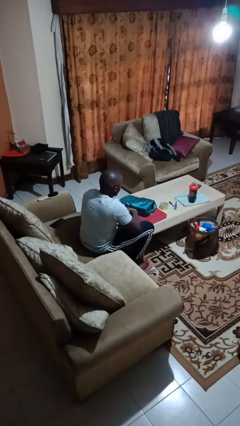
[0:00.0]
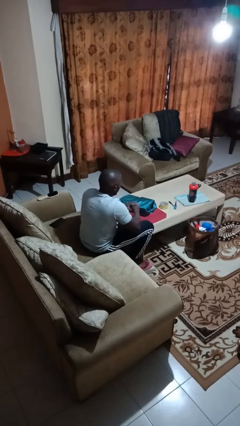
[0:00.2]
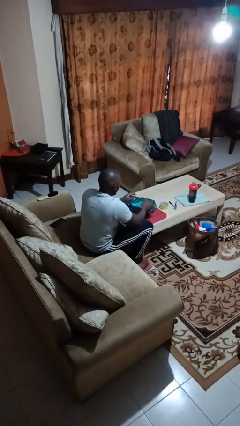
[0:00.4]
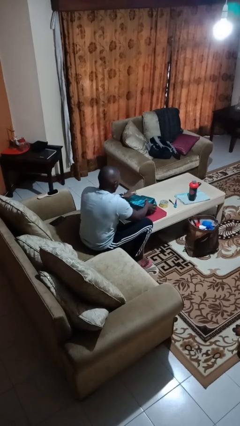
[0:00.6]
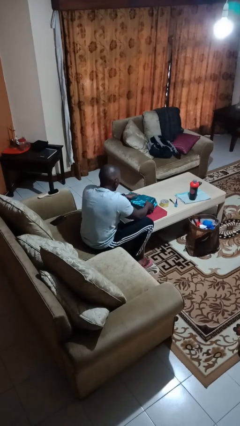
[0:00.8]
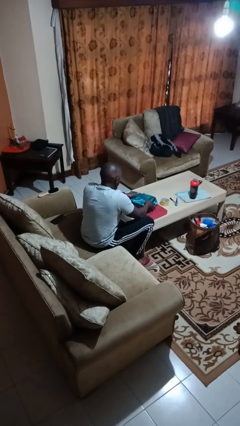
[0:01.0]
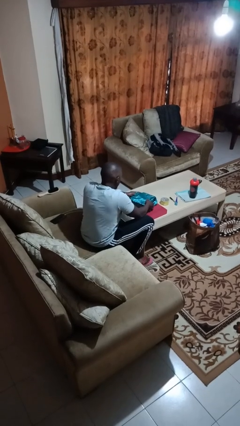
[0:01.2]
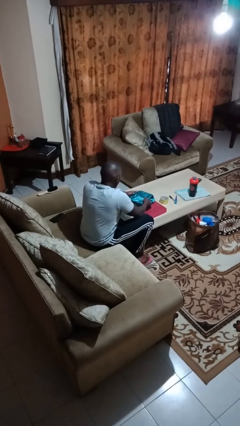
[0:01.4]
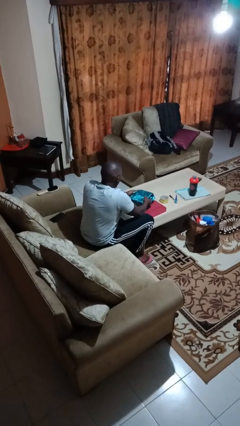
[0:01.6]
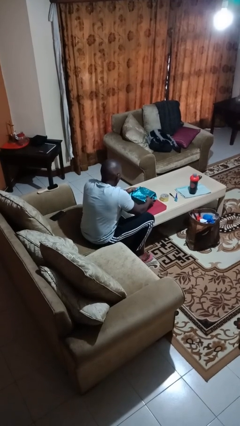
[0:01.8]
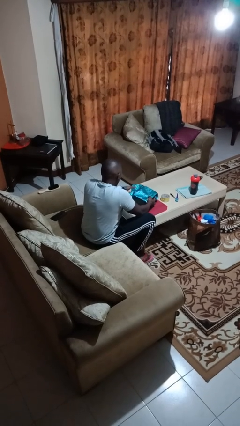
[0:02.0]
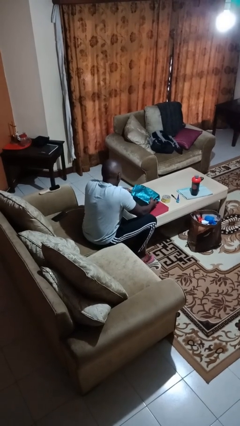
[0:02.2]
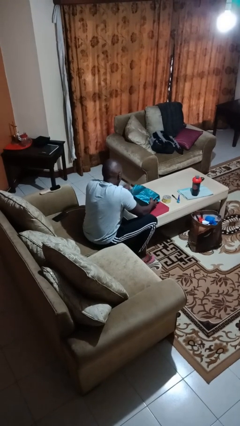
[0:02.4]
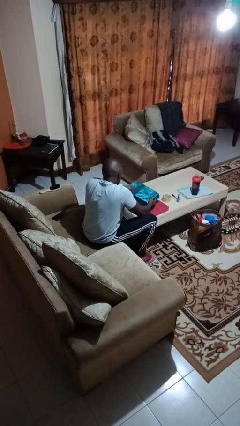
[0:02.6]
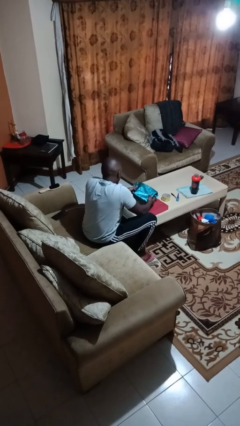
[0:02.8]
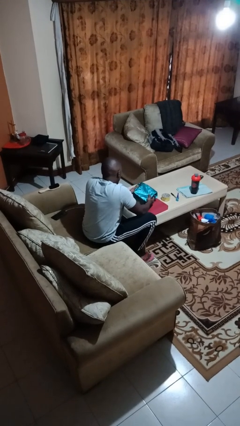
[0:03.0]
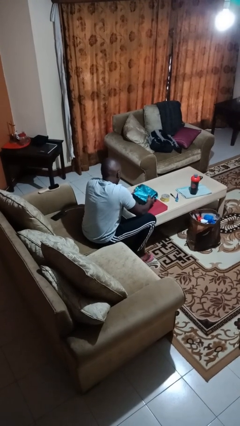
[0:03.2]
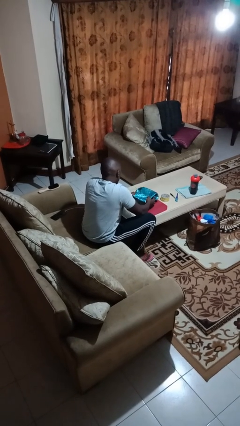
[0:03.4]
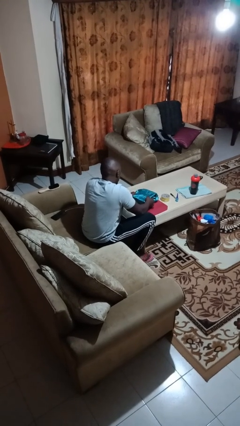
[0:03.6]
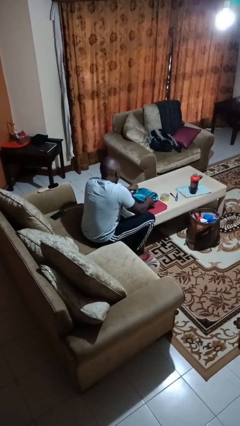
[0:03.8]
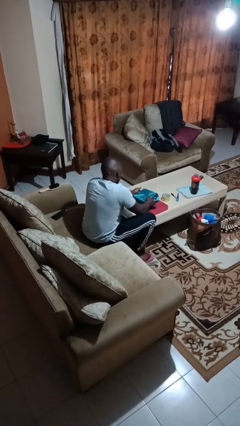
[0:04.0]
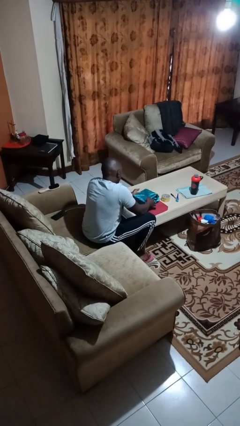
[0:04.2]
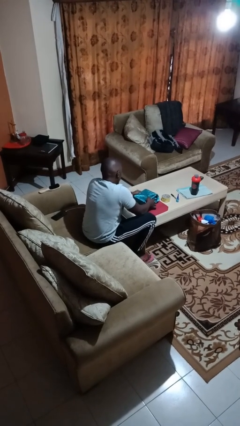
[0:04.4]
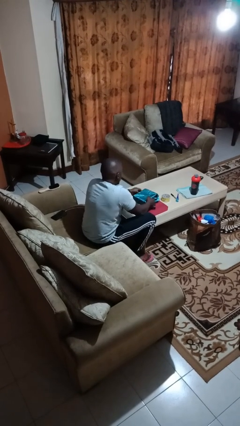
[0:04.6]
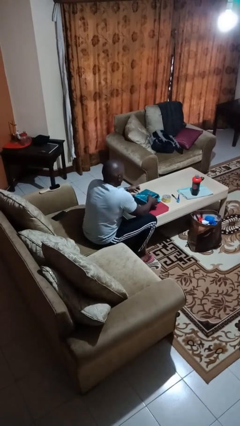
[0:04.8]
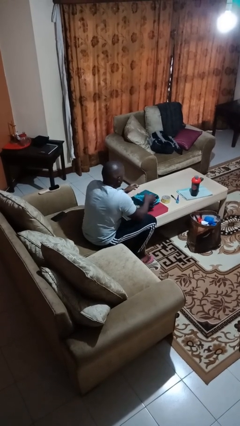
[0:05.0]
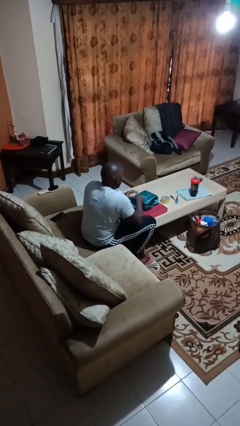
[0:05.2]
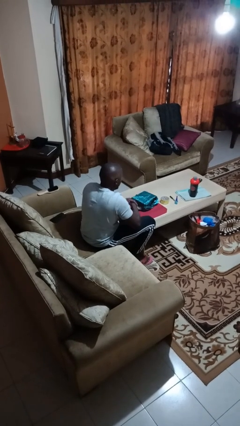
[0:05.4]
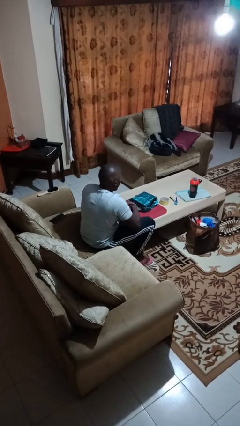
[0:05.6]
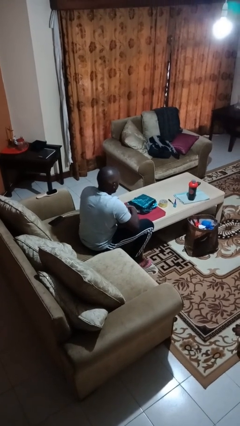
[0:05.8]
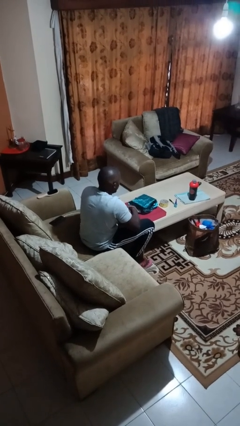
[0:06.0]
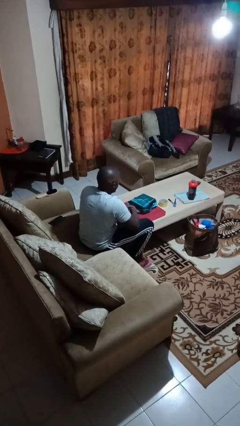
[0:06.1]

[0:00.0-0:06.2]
person wraps box

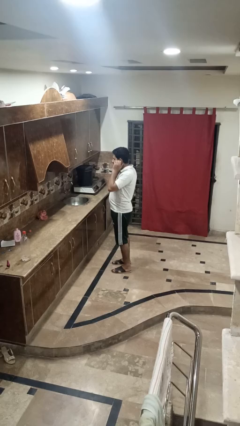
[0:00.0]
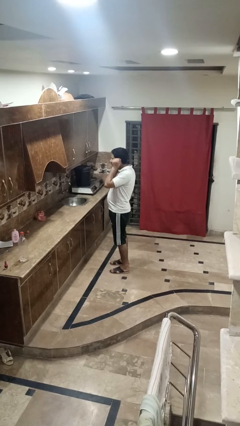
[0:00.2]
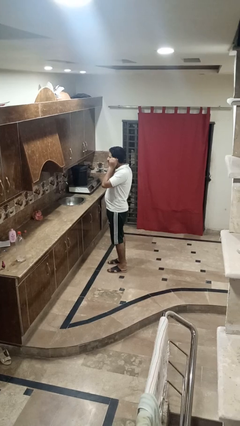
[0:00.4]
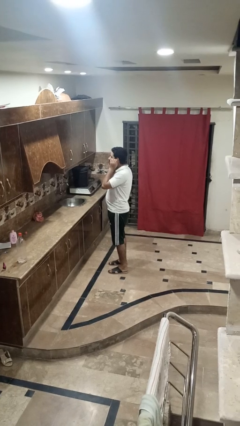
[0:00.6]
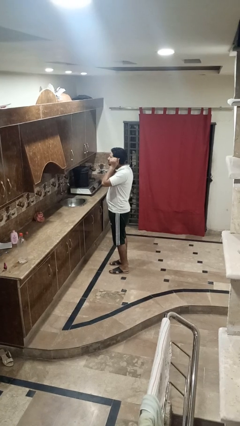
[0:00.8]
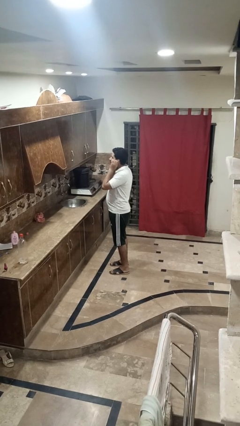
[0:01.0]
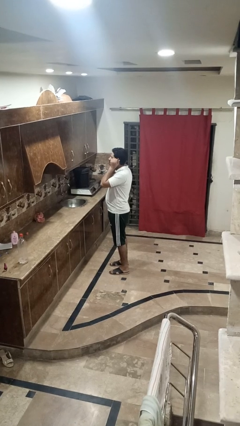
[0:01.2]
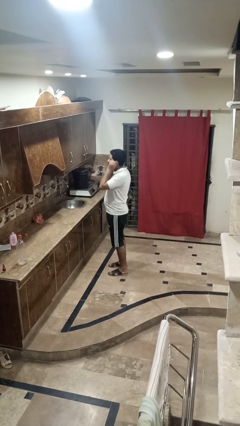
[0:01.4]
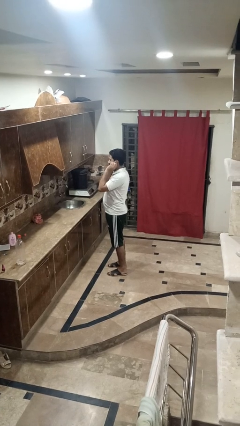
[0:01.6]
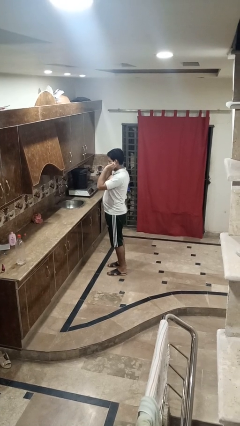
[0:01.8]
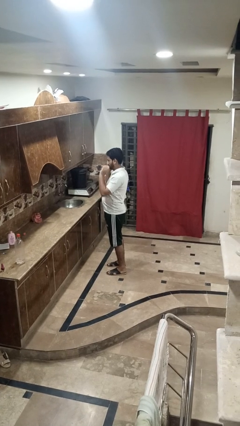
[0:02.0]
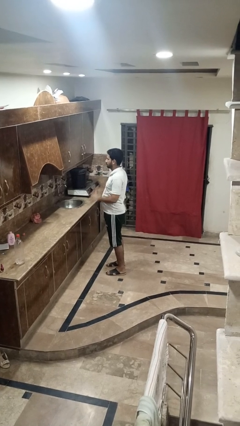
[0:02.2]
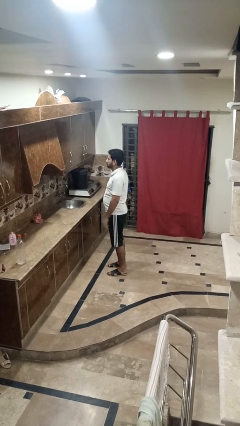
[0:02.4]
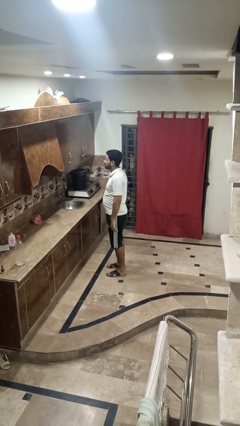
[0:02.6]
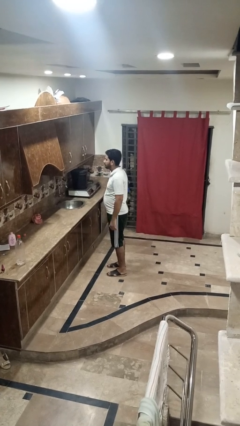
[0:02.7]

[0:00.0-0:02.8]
person touches earlobe

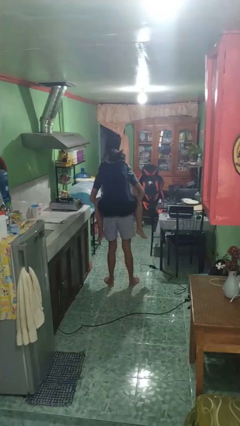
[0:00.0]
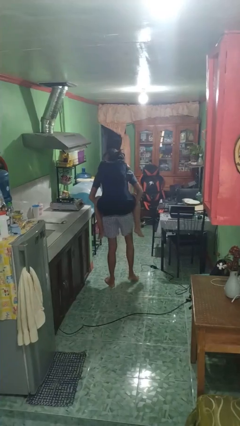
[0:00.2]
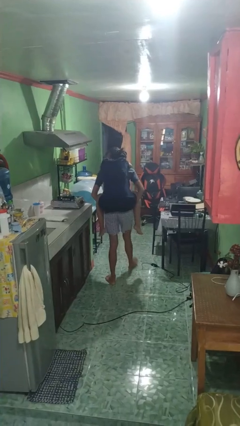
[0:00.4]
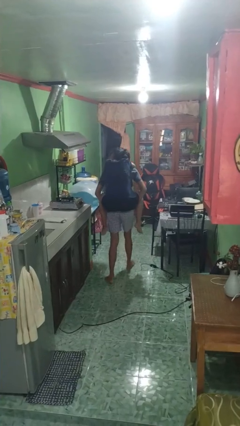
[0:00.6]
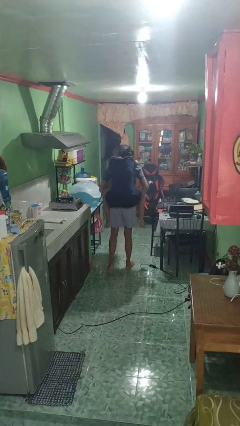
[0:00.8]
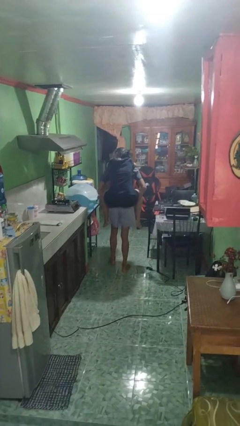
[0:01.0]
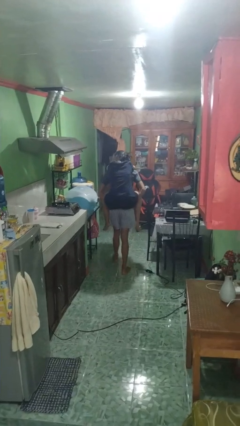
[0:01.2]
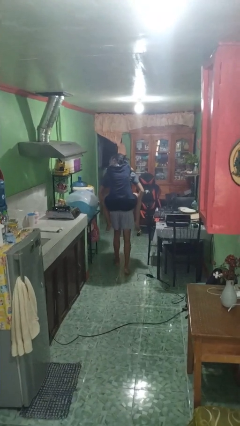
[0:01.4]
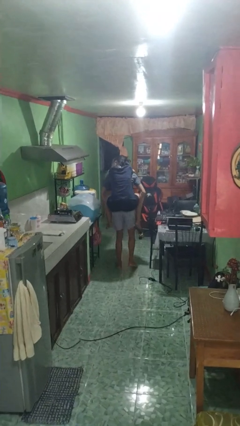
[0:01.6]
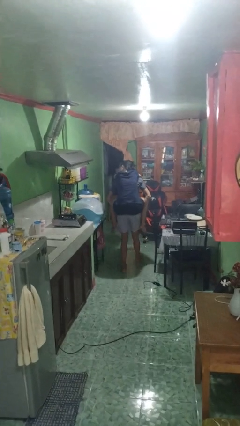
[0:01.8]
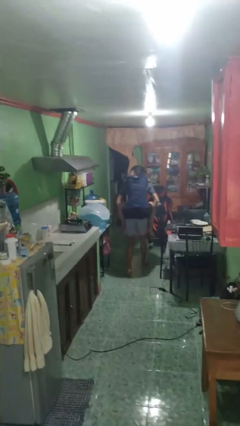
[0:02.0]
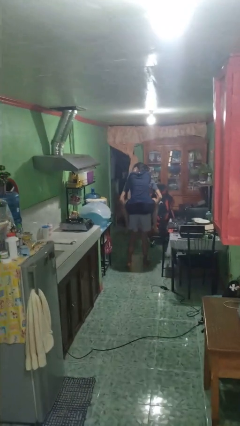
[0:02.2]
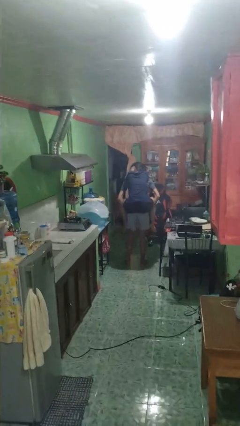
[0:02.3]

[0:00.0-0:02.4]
person carries person on back

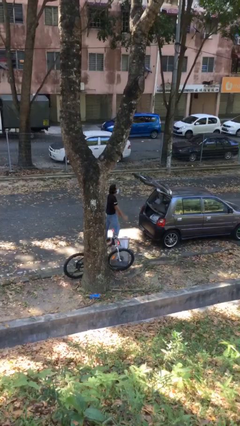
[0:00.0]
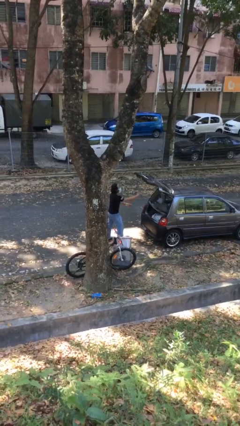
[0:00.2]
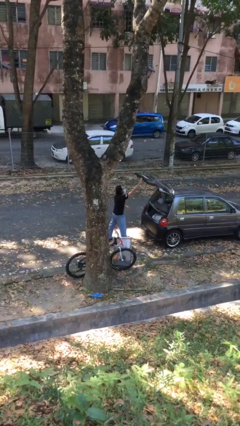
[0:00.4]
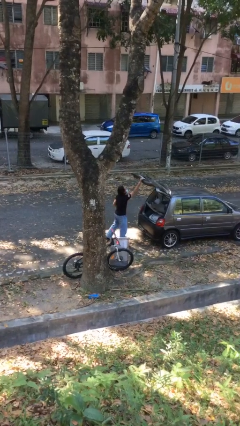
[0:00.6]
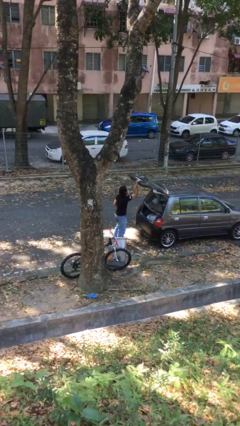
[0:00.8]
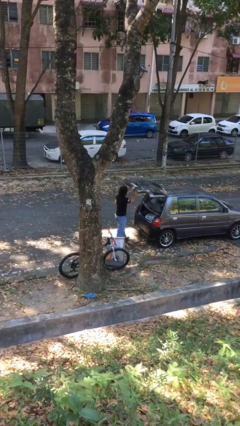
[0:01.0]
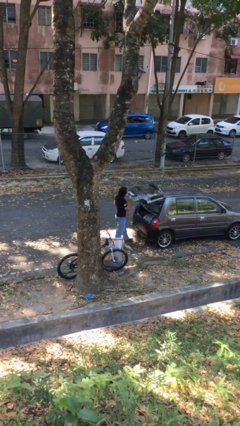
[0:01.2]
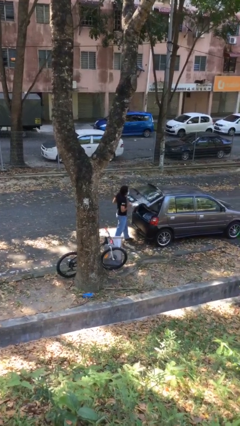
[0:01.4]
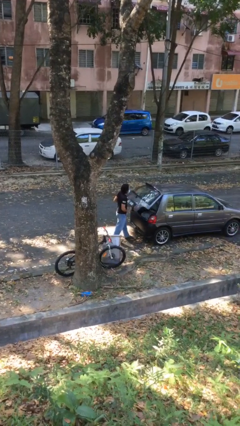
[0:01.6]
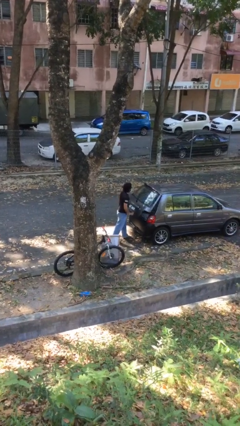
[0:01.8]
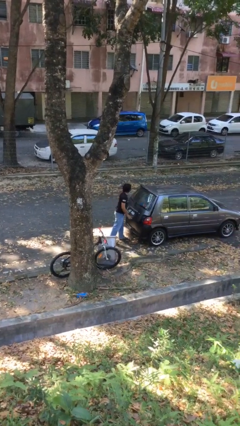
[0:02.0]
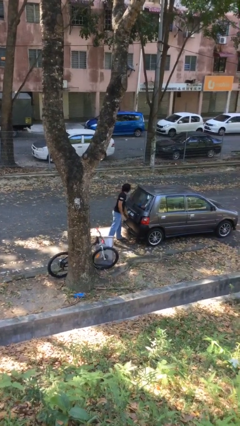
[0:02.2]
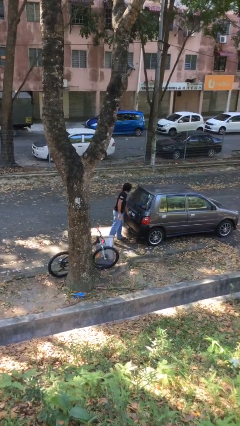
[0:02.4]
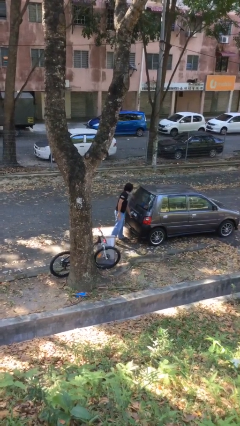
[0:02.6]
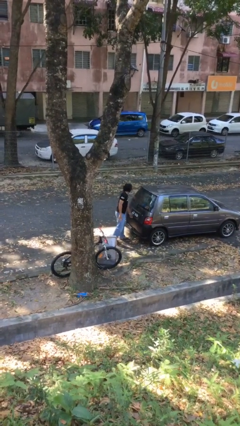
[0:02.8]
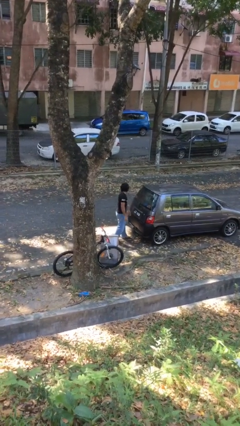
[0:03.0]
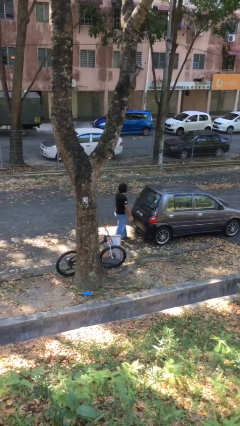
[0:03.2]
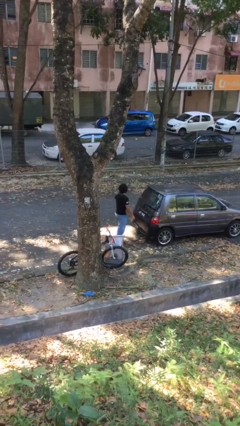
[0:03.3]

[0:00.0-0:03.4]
person closes car trunk

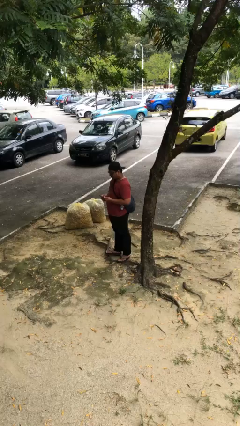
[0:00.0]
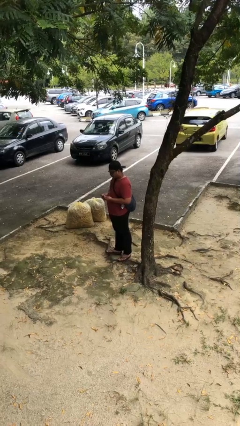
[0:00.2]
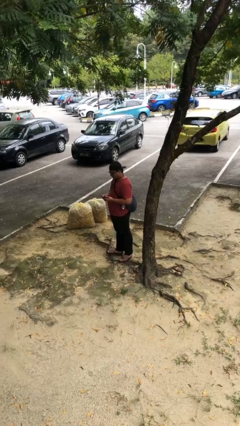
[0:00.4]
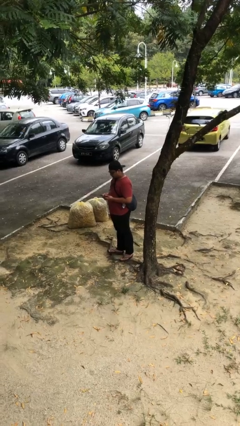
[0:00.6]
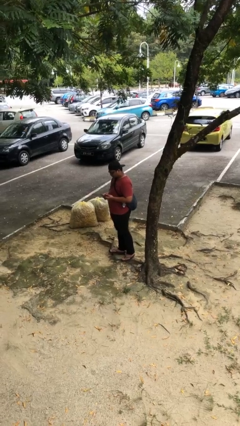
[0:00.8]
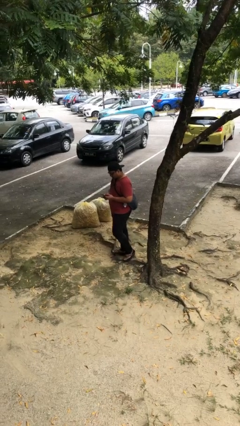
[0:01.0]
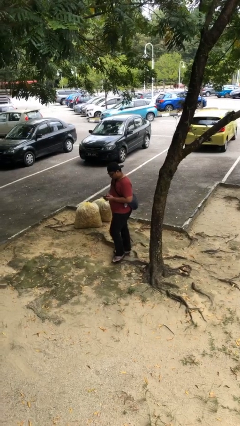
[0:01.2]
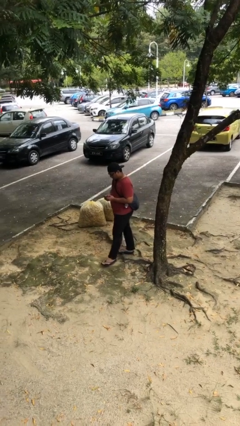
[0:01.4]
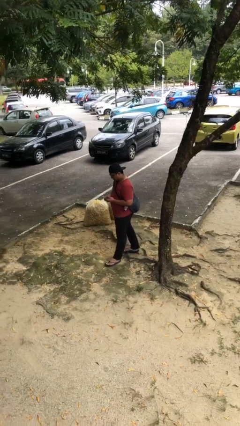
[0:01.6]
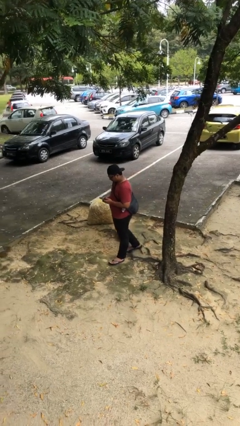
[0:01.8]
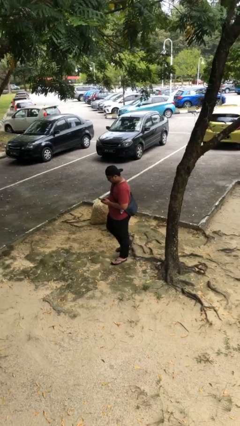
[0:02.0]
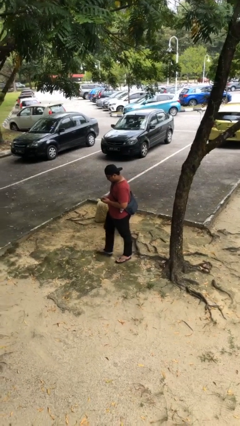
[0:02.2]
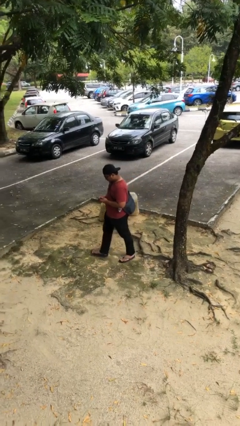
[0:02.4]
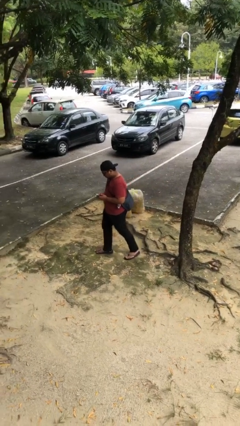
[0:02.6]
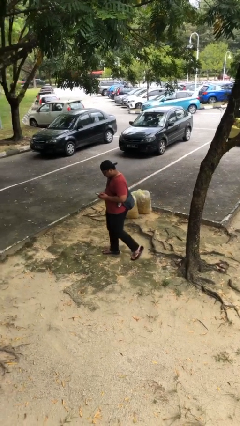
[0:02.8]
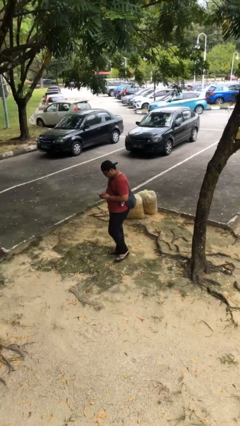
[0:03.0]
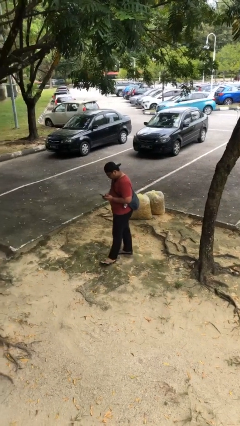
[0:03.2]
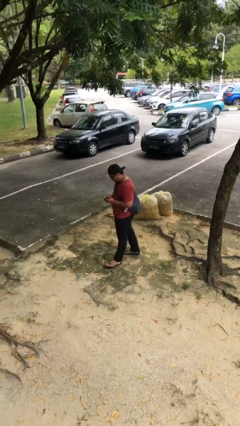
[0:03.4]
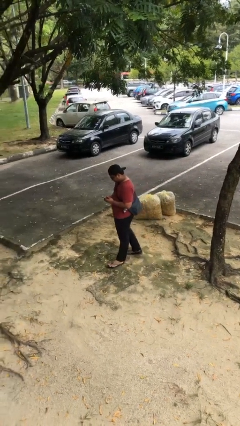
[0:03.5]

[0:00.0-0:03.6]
person texts on phone
